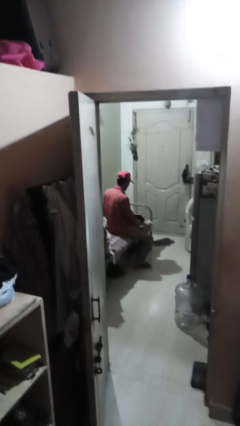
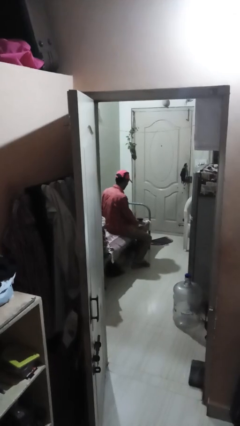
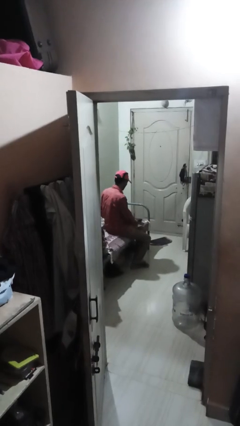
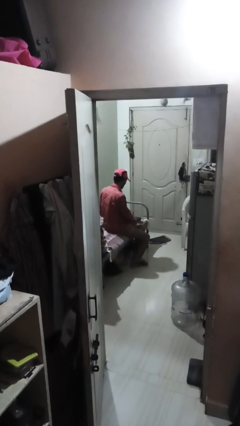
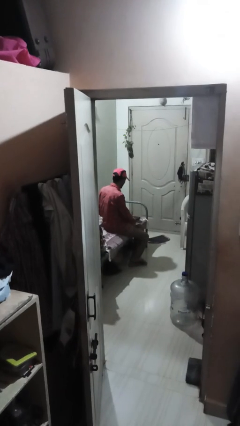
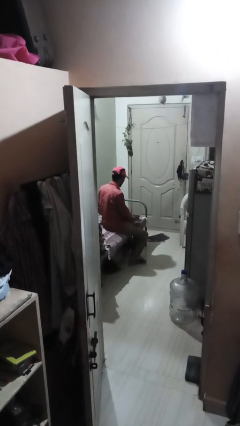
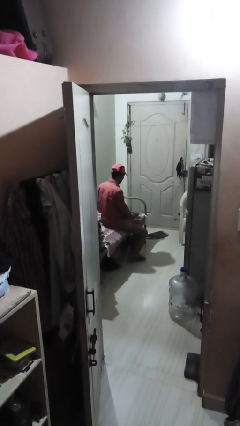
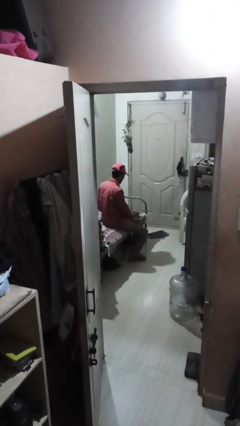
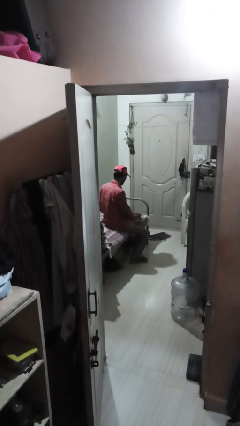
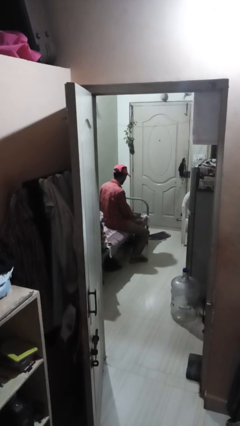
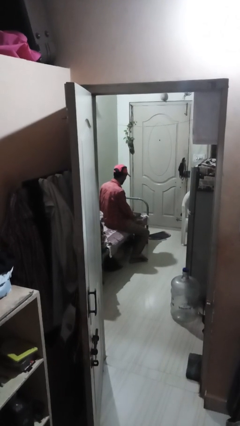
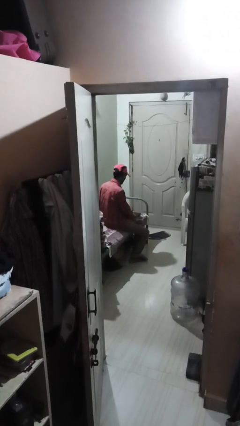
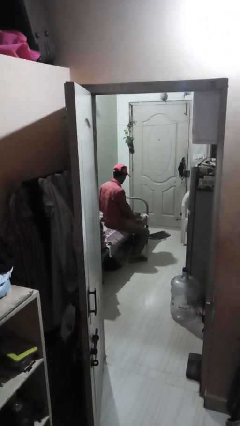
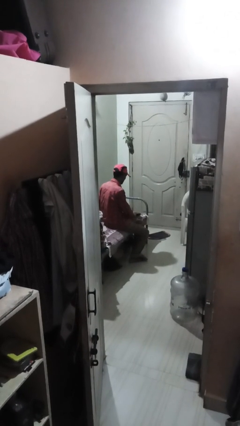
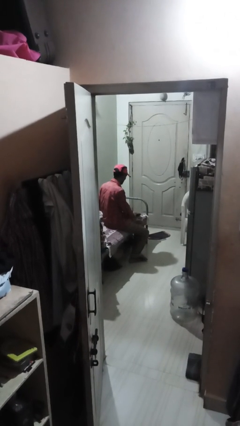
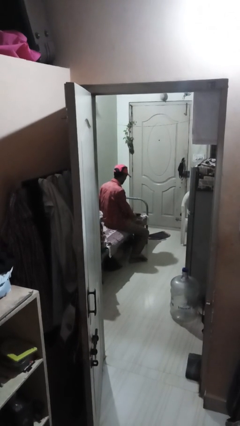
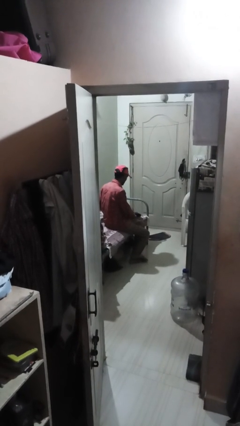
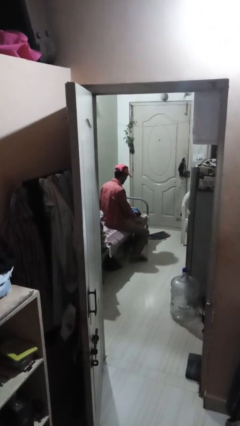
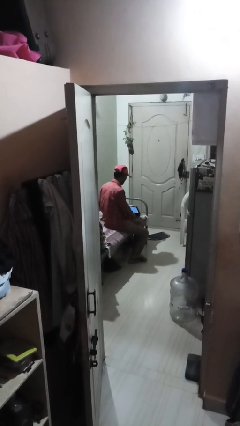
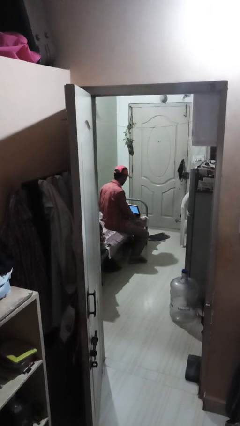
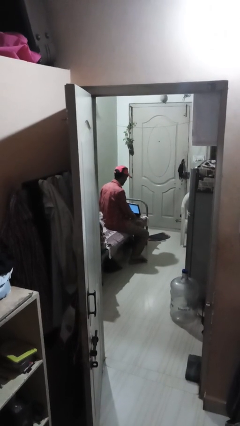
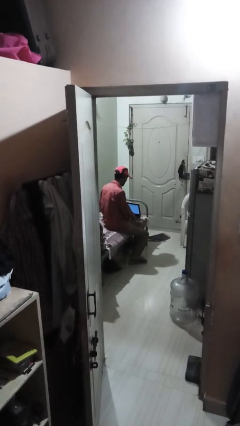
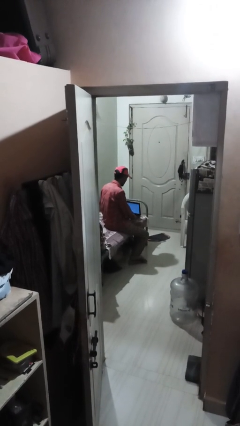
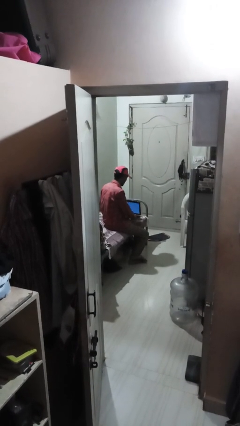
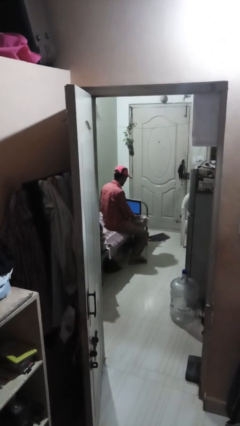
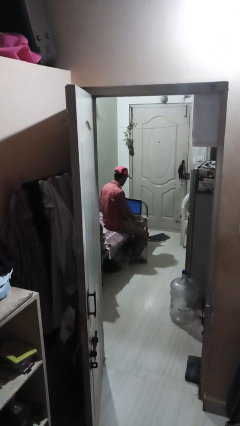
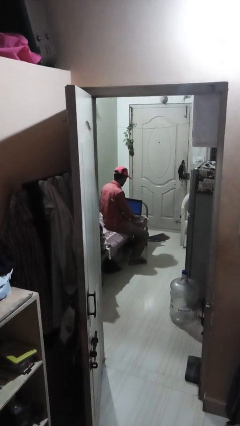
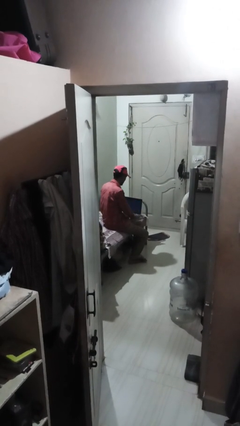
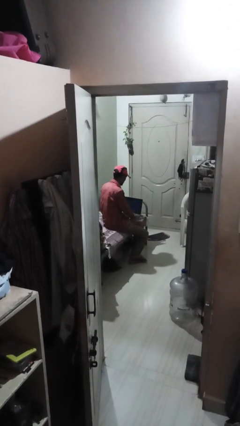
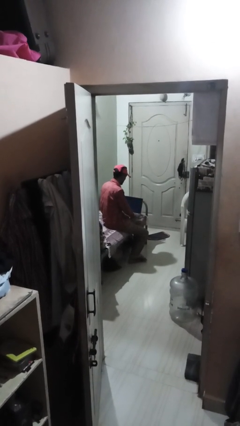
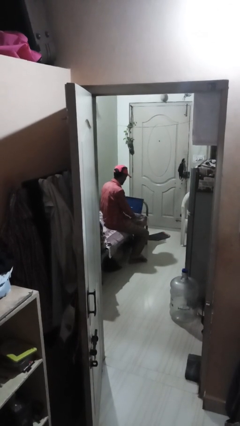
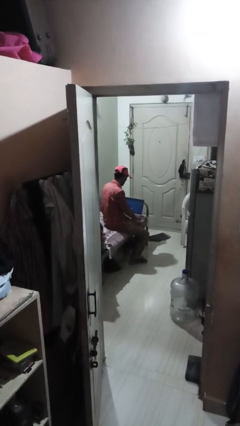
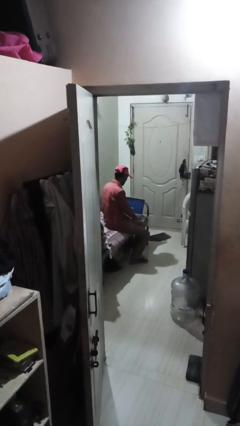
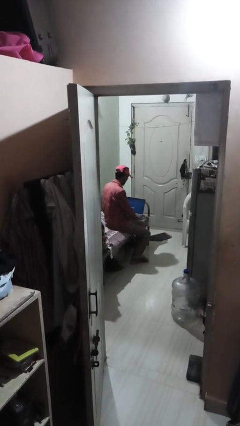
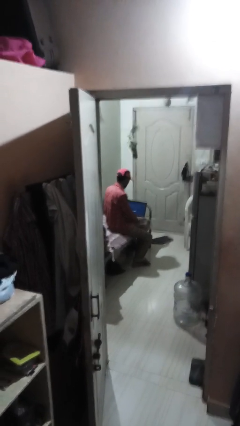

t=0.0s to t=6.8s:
person opens laptop

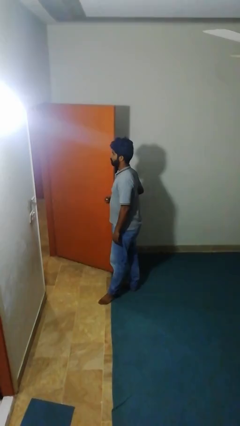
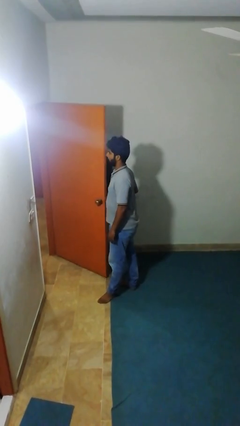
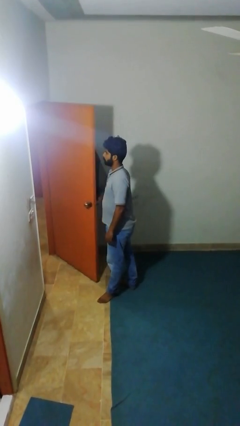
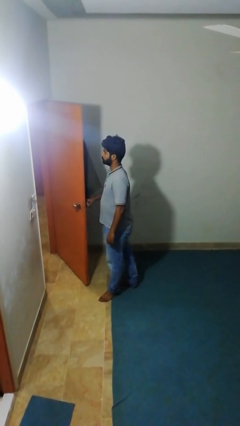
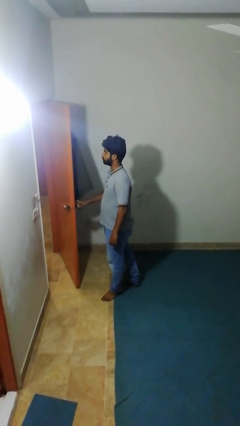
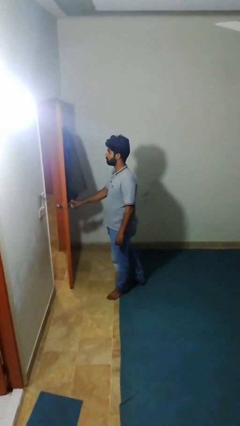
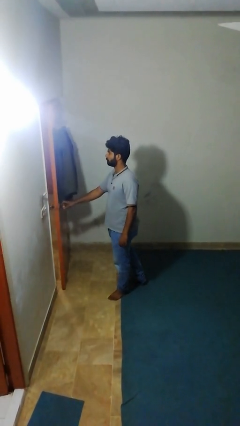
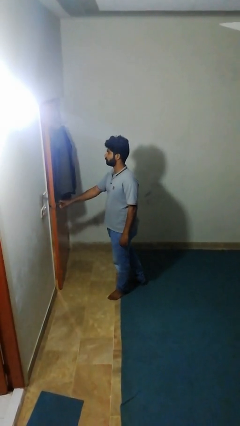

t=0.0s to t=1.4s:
person closes facility door

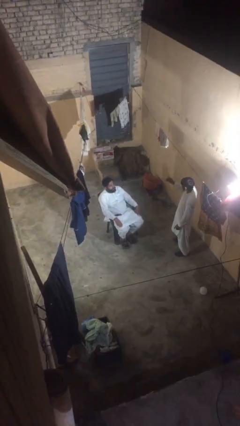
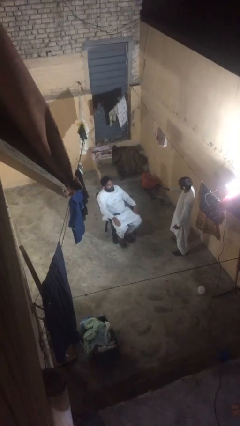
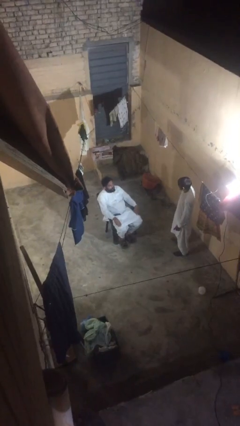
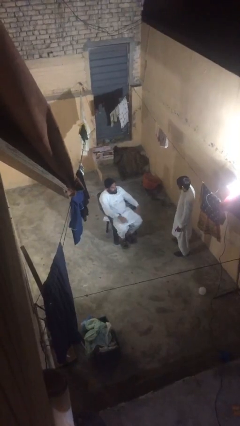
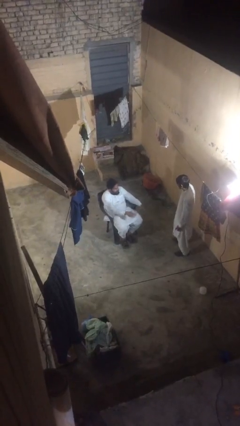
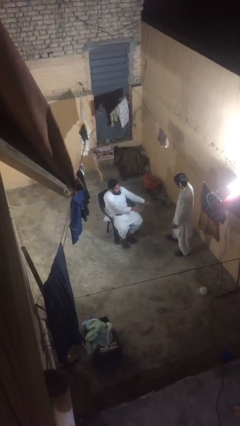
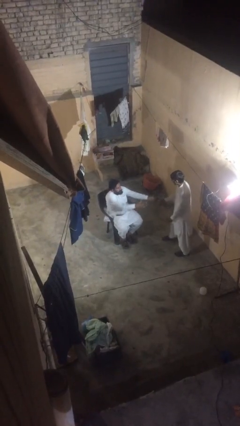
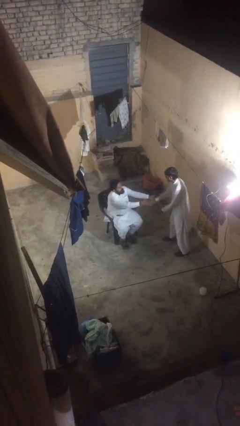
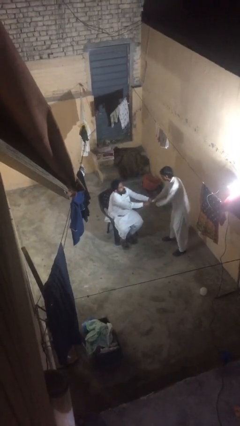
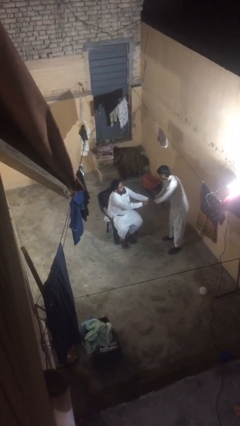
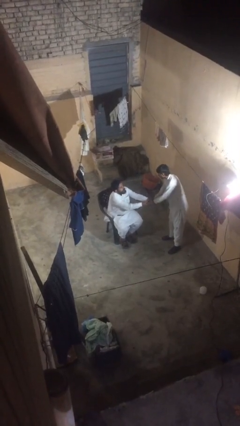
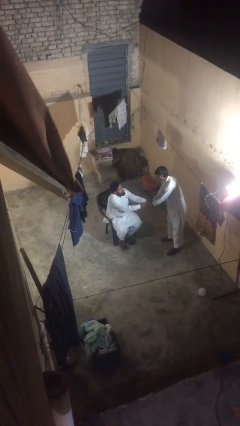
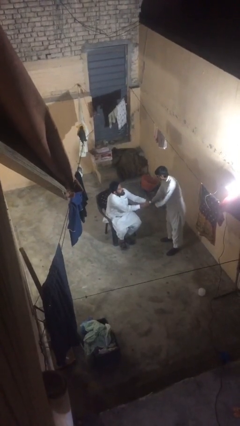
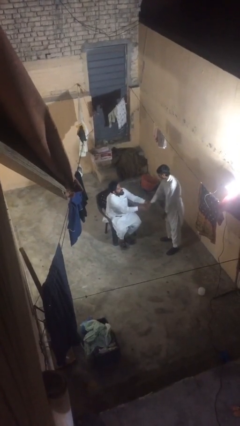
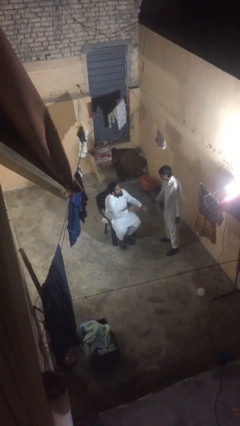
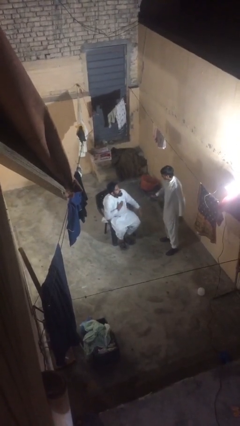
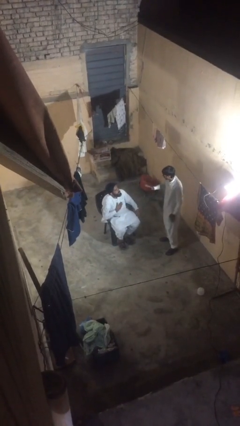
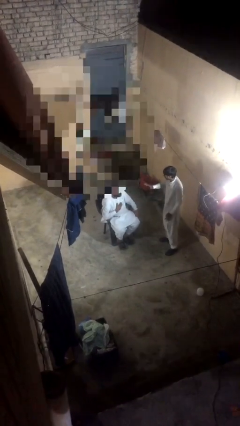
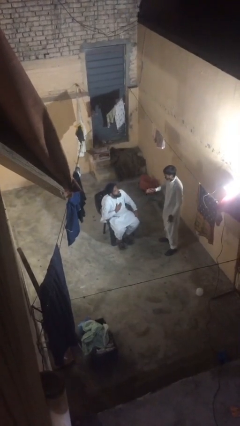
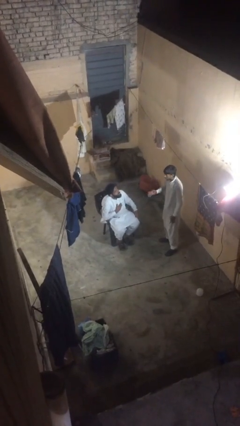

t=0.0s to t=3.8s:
person shakes hand

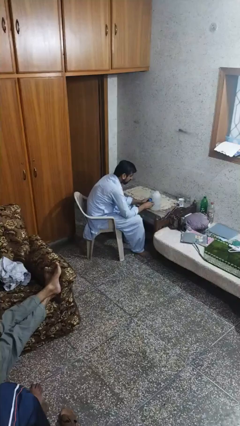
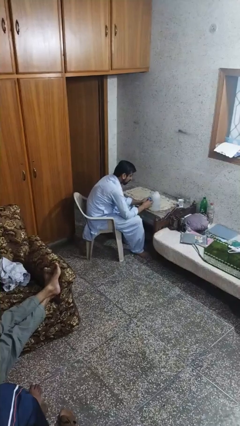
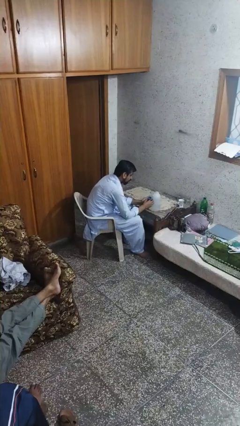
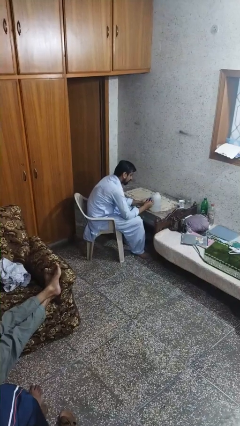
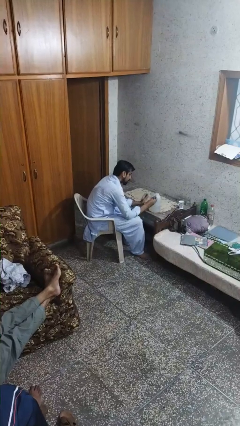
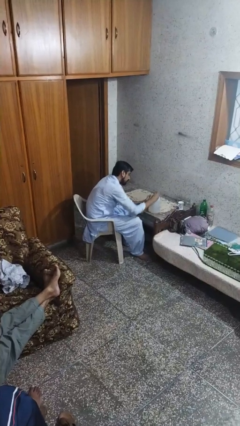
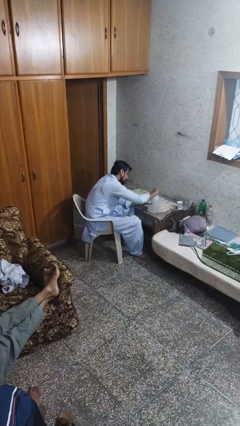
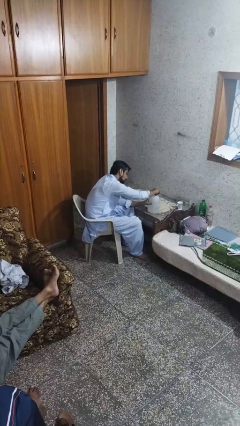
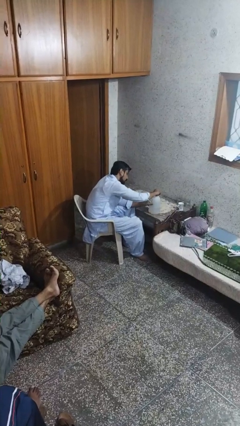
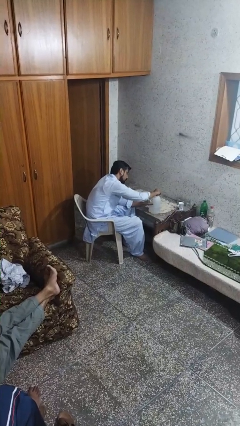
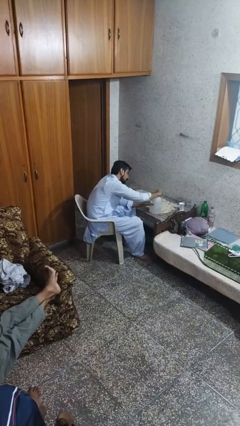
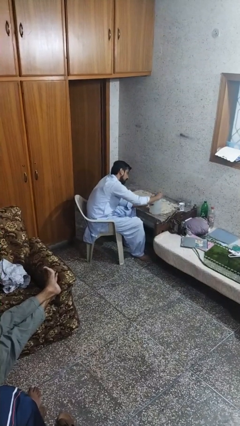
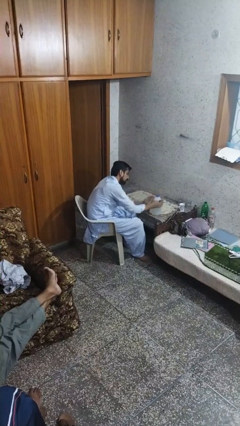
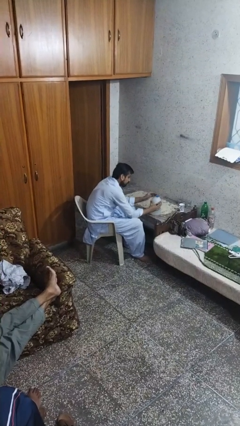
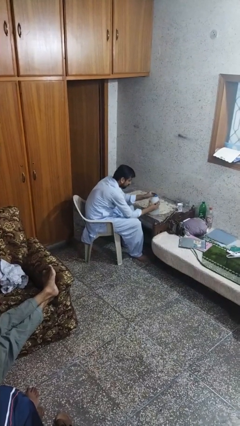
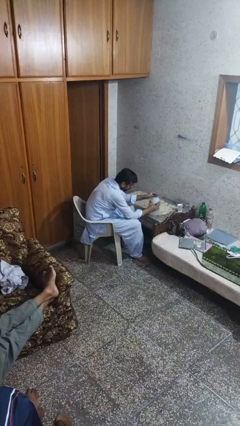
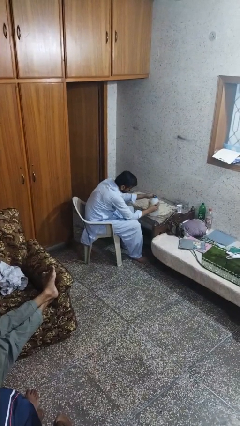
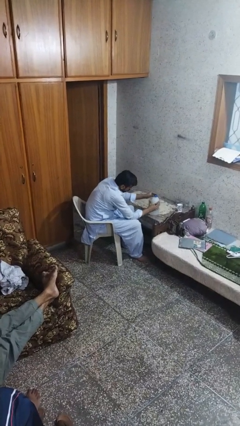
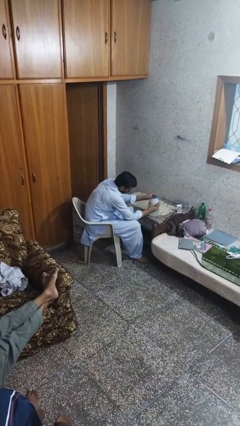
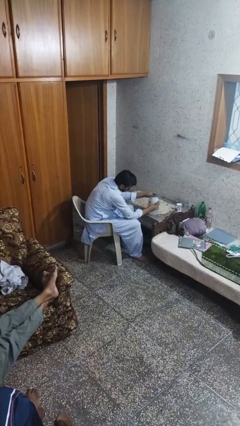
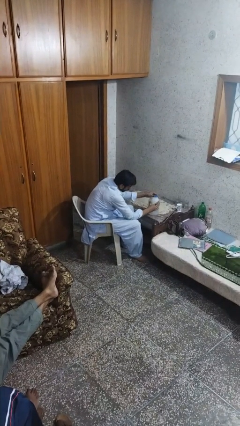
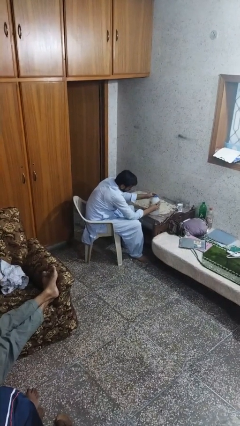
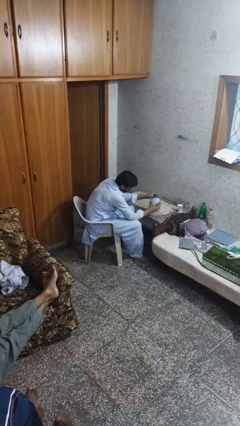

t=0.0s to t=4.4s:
person screws lid to bottle

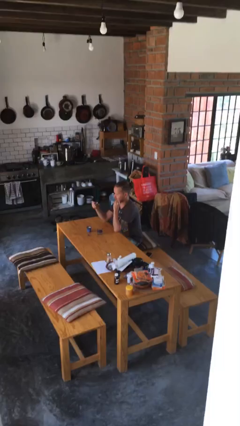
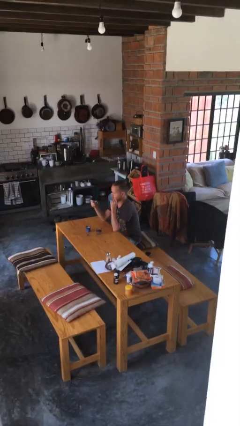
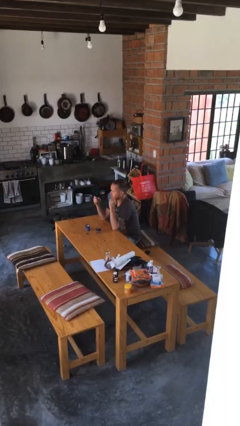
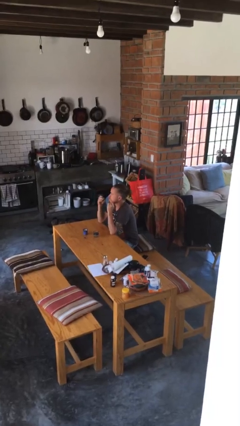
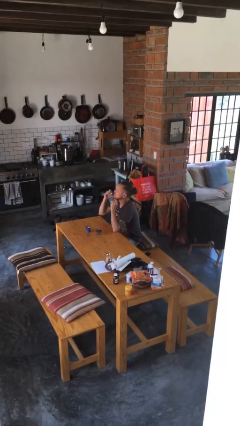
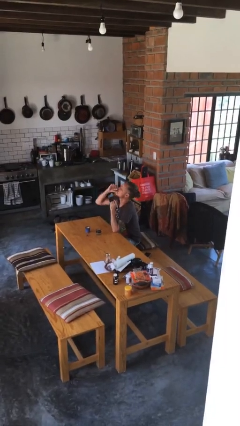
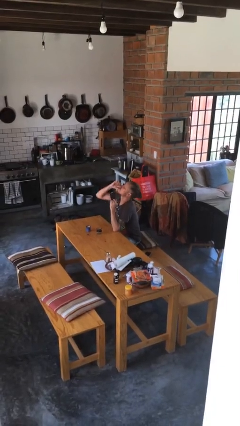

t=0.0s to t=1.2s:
person drinks from shotglass
